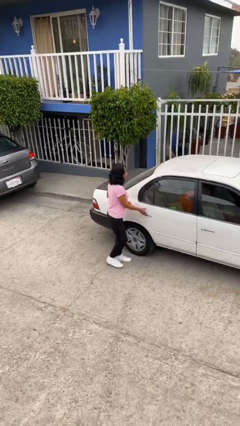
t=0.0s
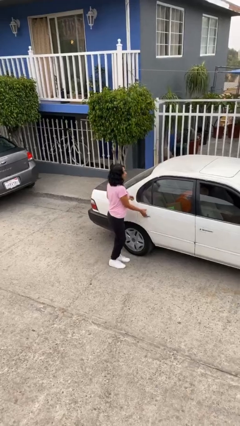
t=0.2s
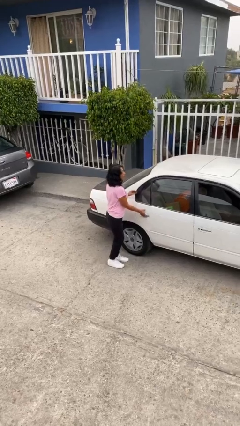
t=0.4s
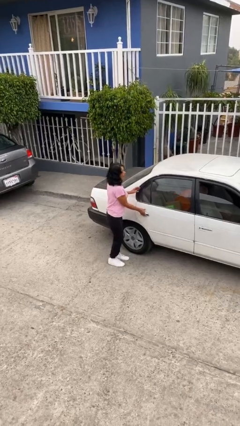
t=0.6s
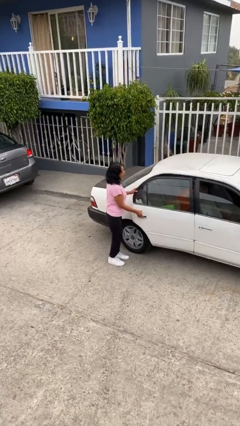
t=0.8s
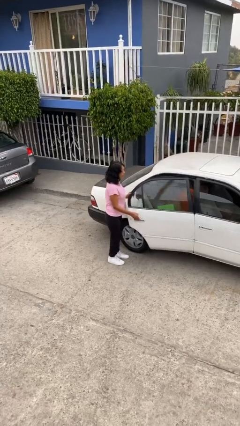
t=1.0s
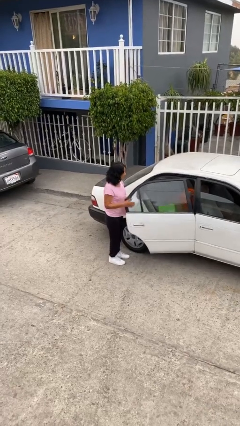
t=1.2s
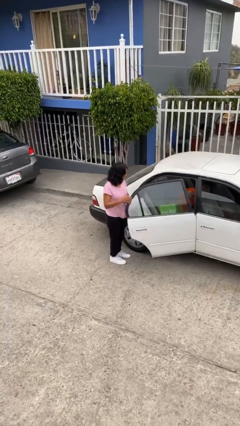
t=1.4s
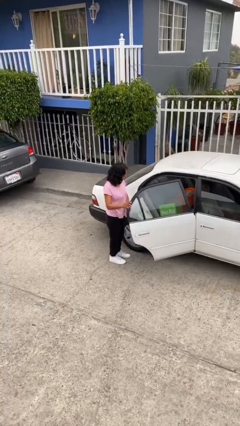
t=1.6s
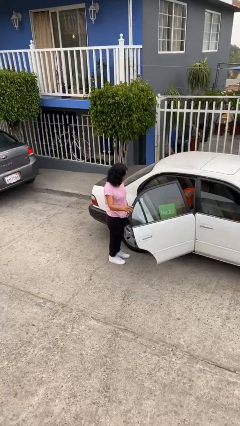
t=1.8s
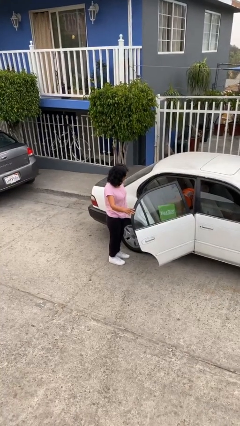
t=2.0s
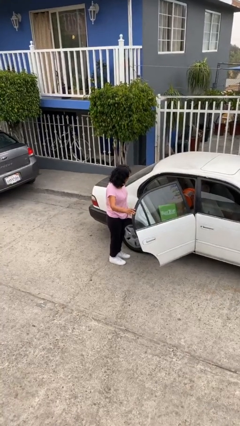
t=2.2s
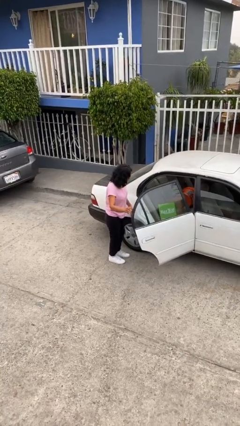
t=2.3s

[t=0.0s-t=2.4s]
person opens car door

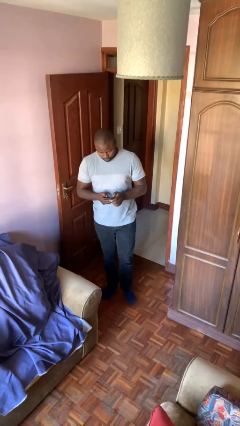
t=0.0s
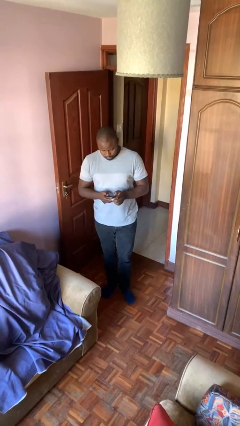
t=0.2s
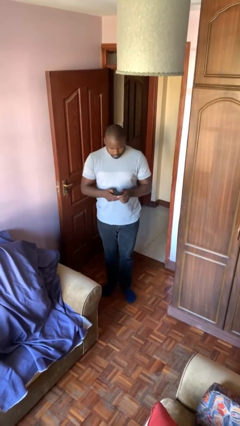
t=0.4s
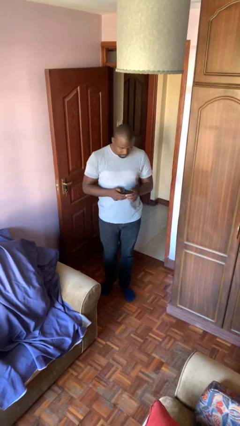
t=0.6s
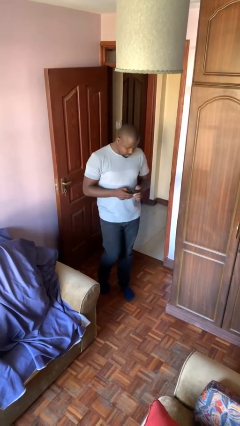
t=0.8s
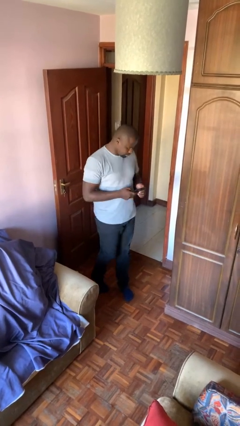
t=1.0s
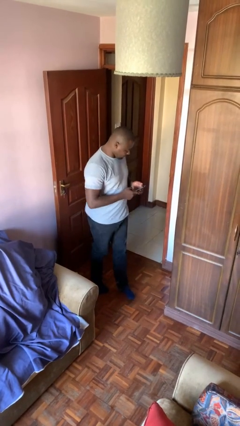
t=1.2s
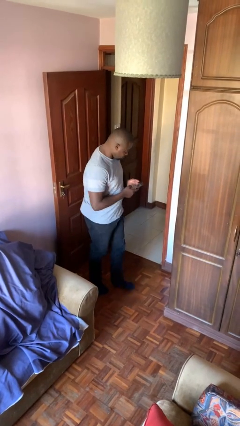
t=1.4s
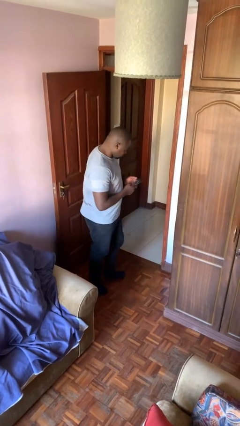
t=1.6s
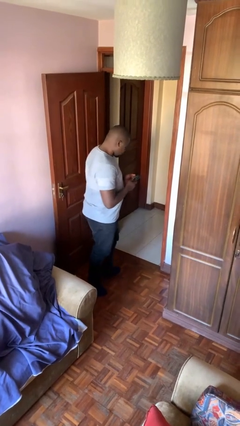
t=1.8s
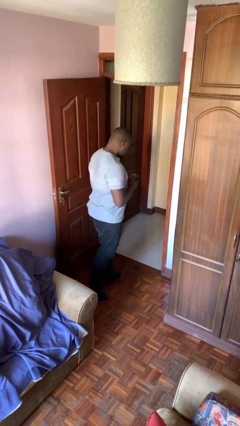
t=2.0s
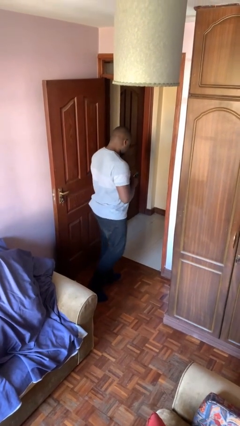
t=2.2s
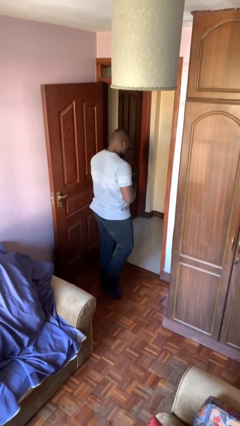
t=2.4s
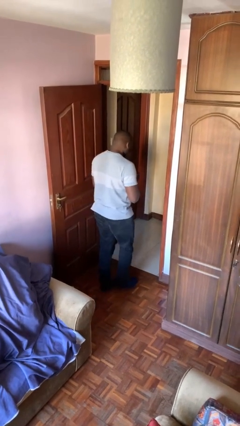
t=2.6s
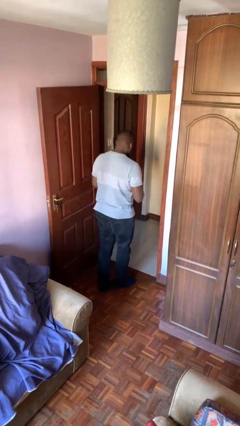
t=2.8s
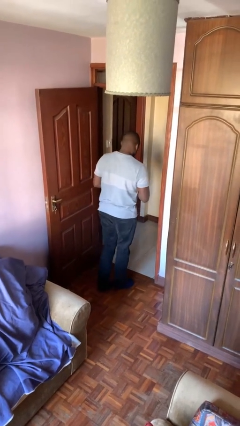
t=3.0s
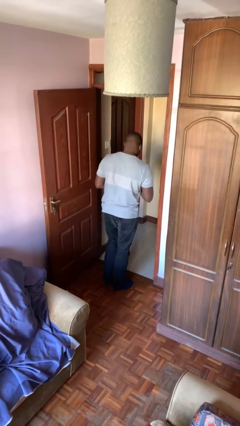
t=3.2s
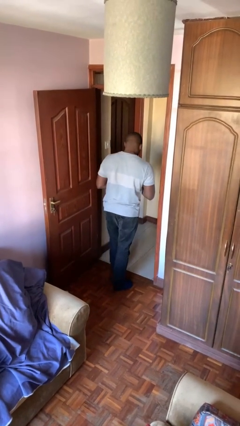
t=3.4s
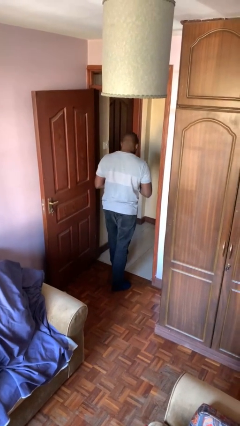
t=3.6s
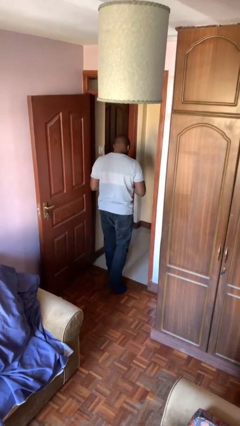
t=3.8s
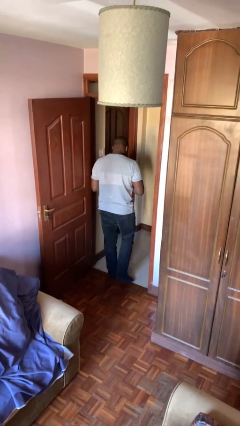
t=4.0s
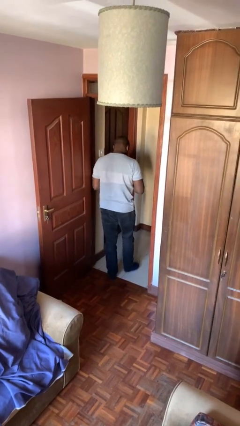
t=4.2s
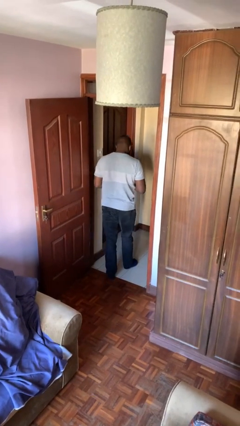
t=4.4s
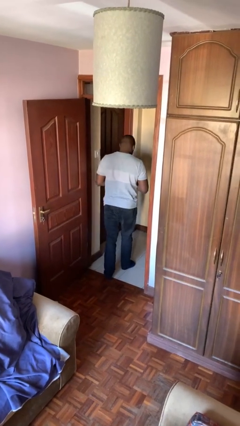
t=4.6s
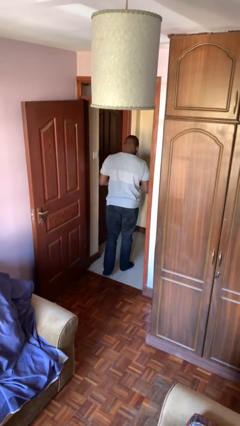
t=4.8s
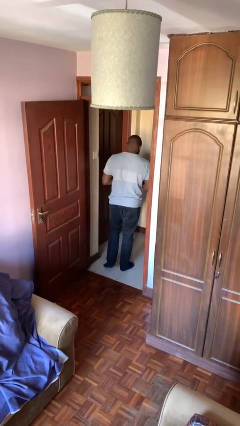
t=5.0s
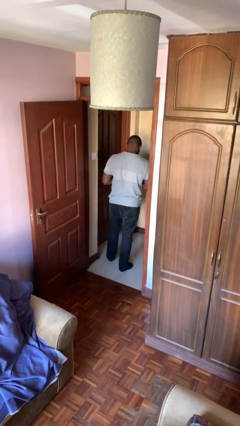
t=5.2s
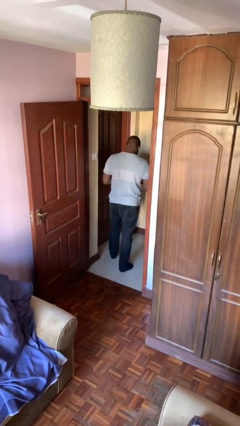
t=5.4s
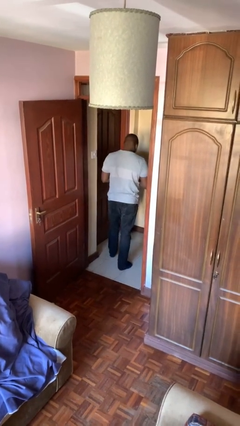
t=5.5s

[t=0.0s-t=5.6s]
person exits scene through structure

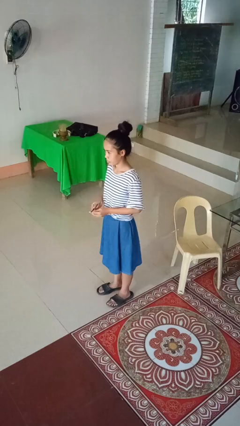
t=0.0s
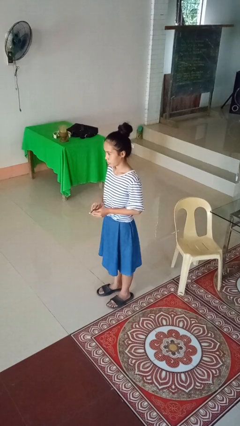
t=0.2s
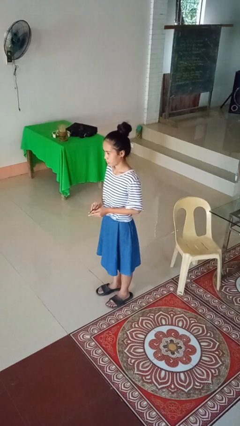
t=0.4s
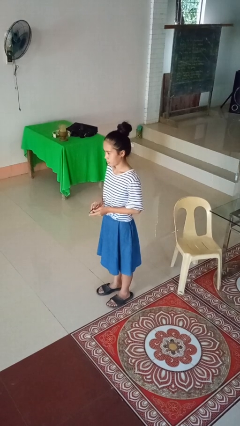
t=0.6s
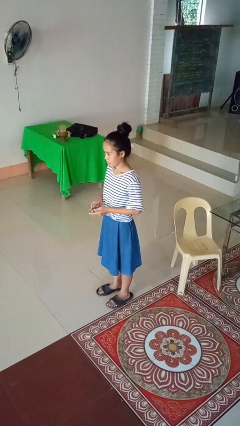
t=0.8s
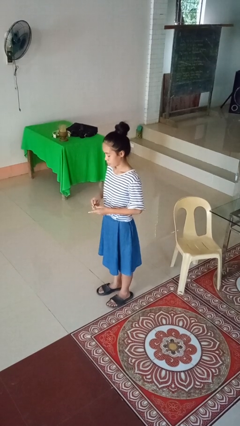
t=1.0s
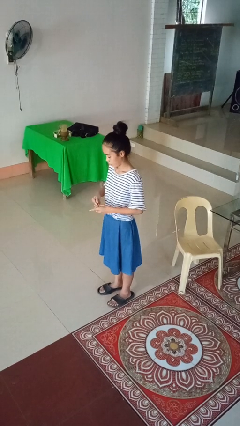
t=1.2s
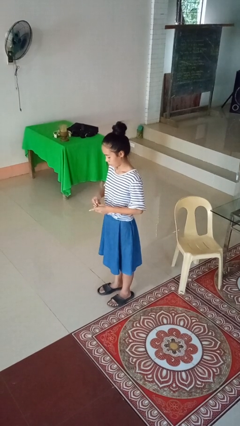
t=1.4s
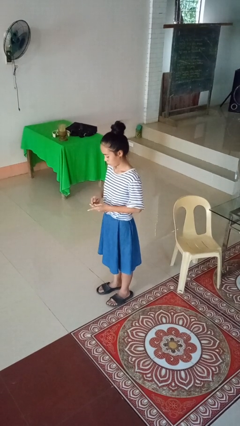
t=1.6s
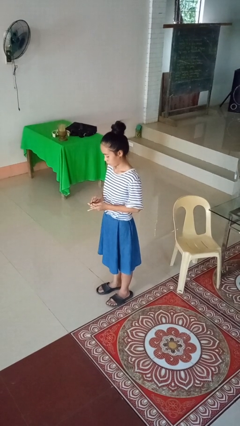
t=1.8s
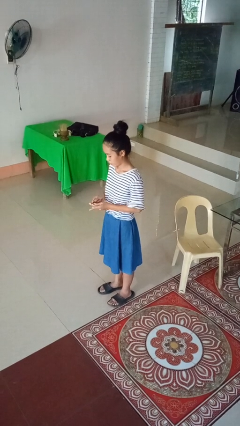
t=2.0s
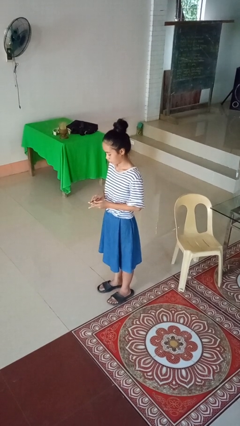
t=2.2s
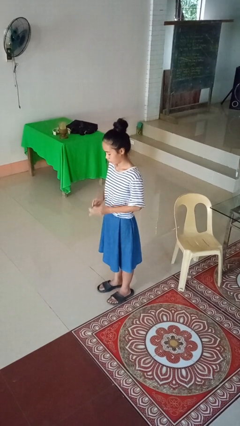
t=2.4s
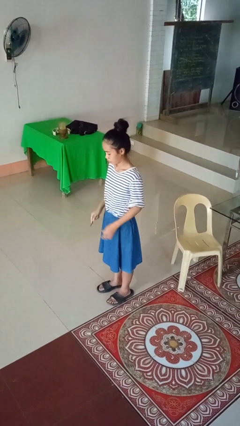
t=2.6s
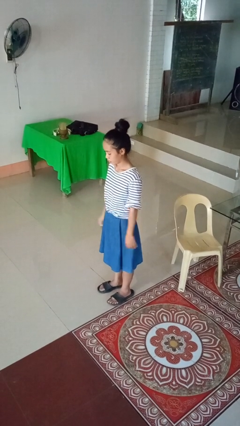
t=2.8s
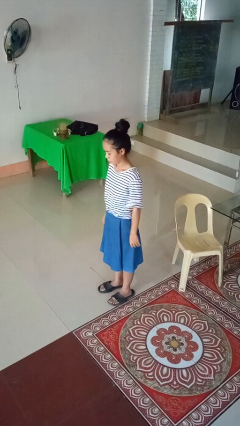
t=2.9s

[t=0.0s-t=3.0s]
person files fingernails

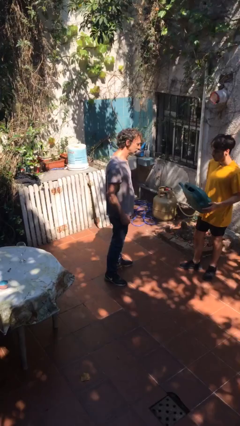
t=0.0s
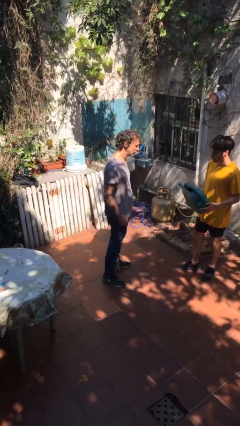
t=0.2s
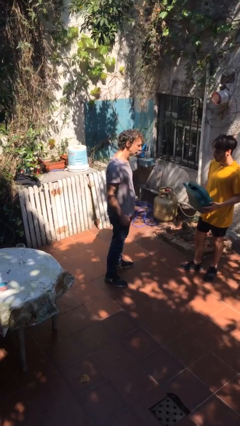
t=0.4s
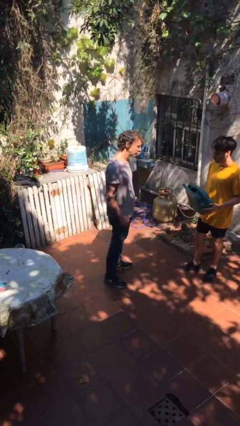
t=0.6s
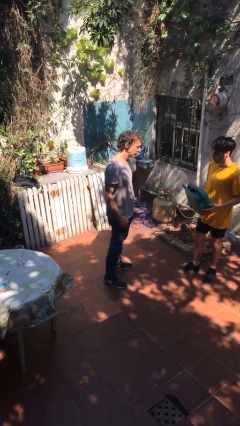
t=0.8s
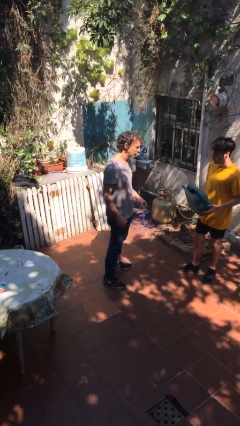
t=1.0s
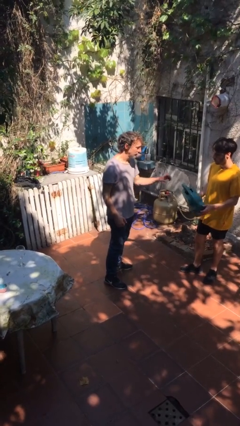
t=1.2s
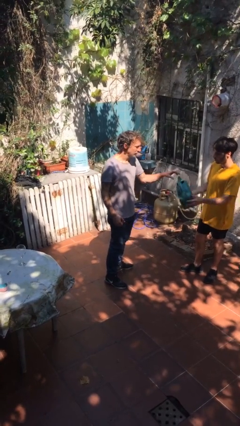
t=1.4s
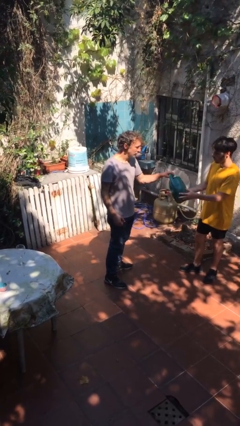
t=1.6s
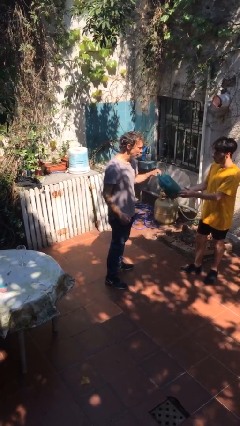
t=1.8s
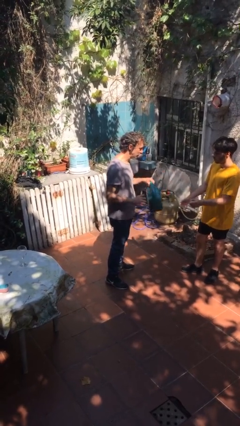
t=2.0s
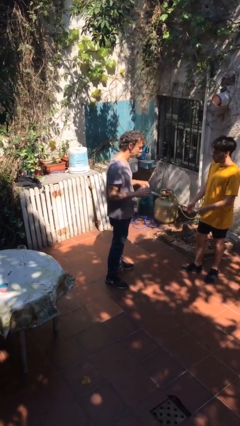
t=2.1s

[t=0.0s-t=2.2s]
person transfers object to person

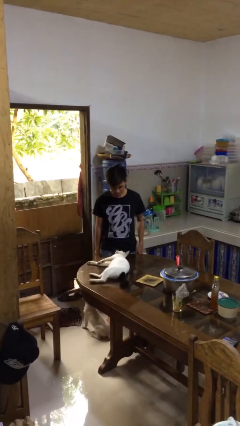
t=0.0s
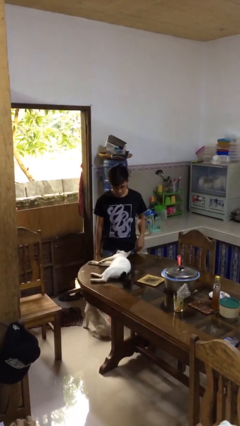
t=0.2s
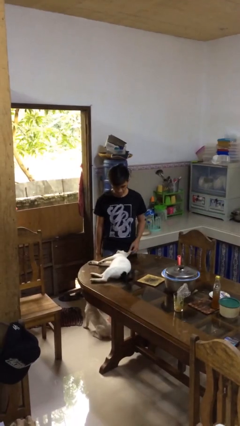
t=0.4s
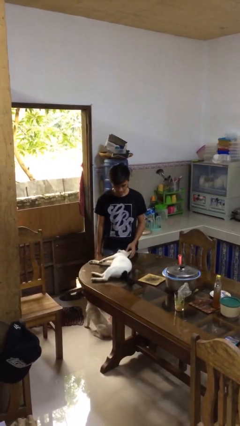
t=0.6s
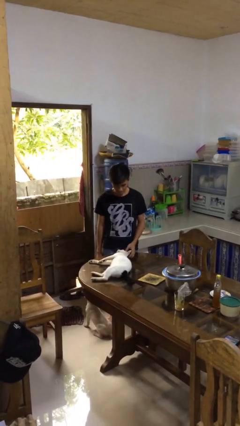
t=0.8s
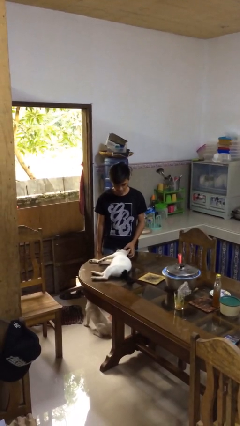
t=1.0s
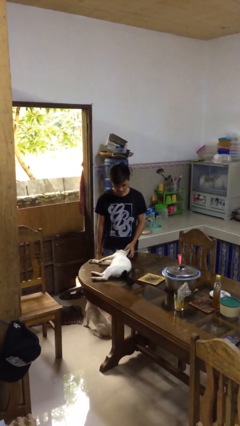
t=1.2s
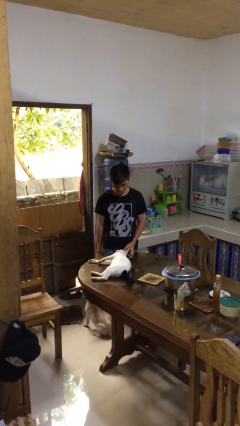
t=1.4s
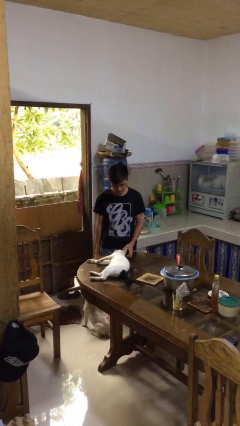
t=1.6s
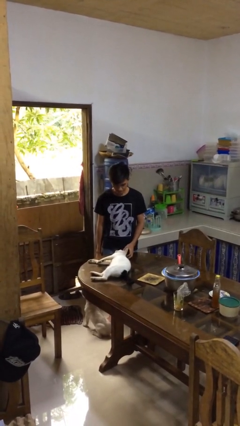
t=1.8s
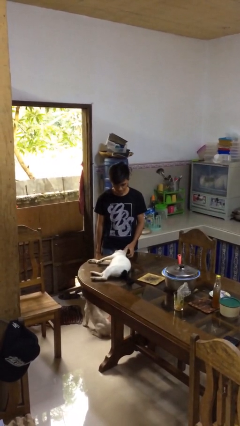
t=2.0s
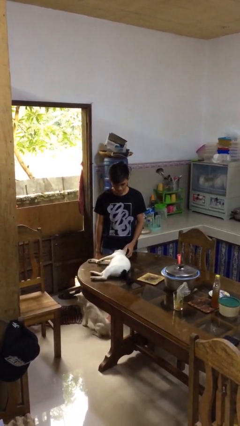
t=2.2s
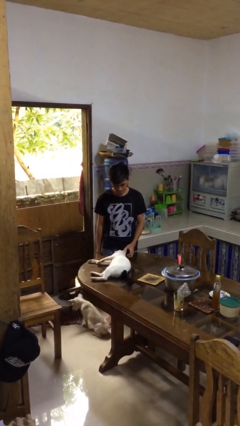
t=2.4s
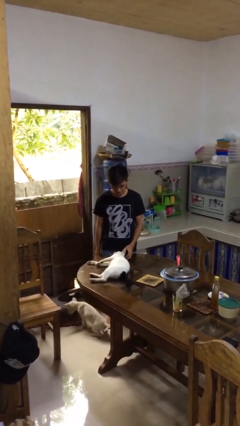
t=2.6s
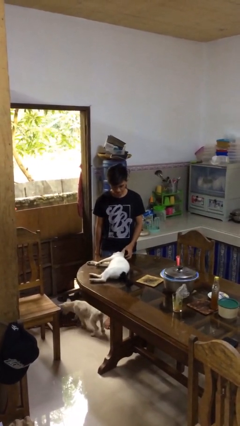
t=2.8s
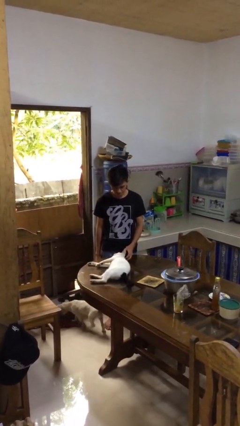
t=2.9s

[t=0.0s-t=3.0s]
person pets cat

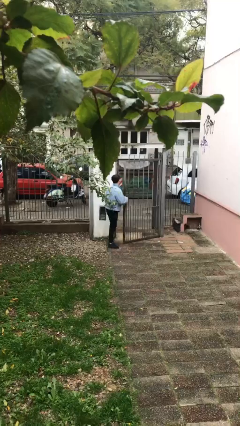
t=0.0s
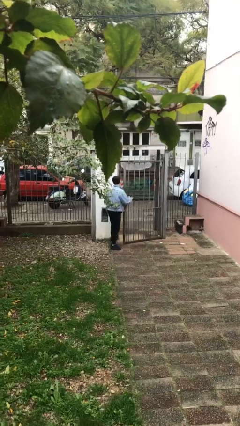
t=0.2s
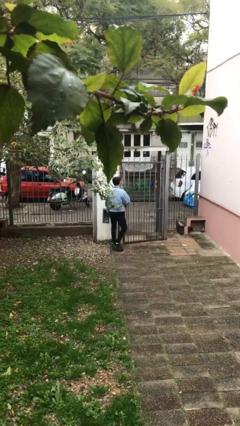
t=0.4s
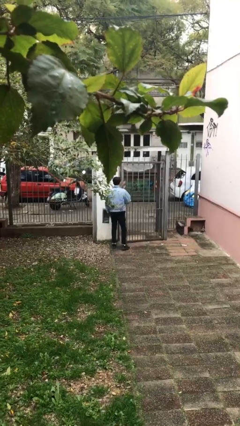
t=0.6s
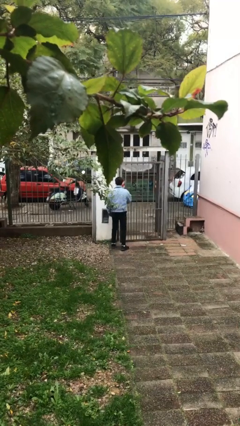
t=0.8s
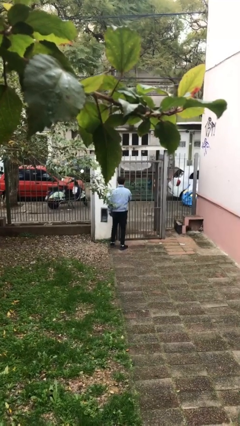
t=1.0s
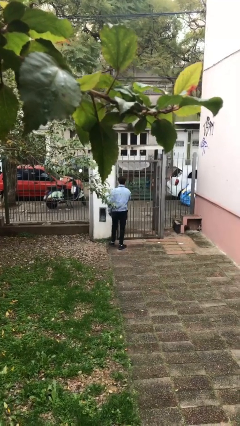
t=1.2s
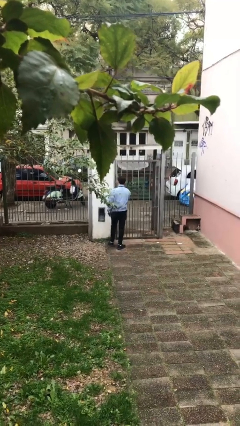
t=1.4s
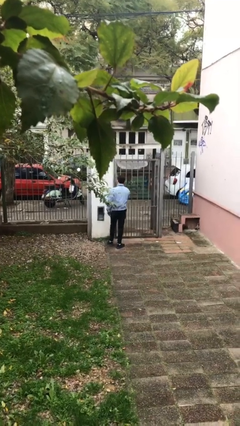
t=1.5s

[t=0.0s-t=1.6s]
person closes facility door
